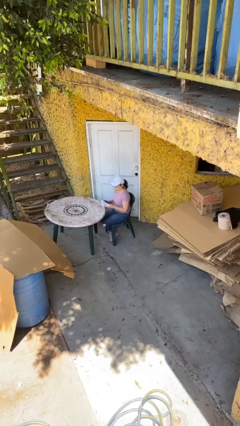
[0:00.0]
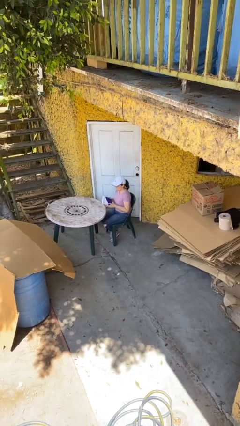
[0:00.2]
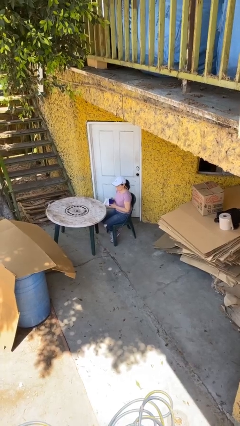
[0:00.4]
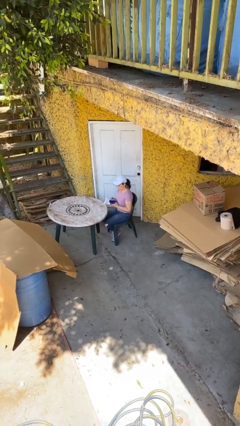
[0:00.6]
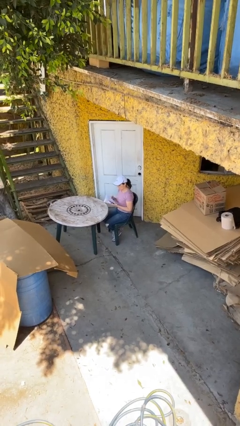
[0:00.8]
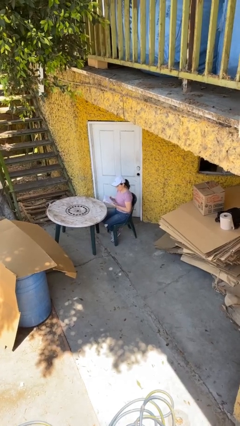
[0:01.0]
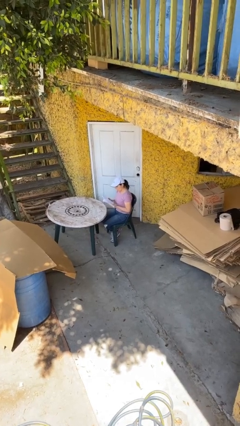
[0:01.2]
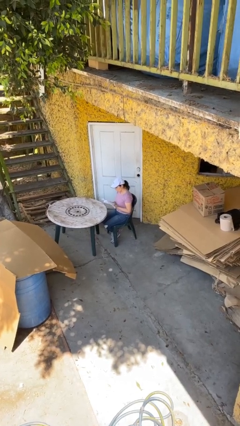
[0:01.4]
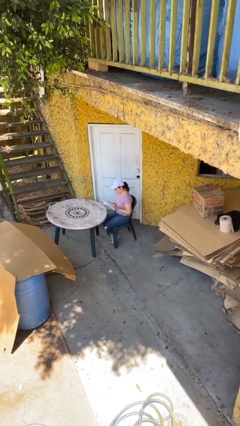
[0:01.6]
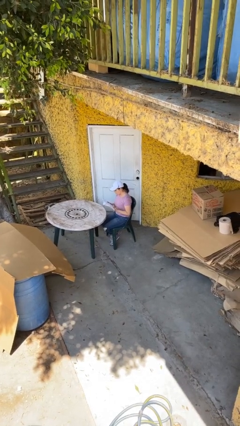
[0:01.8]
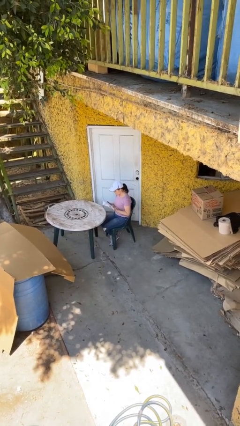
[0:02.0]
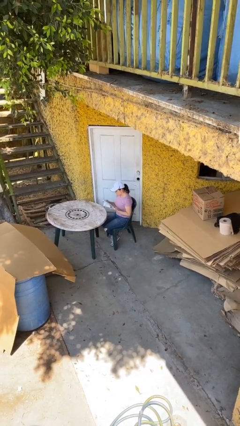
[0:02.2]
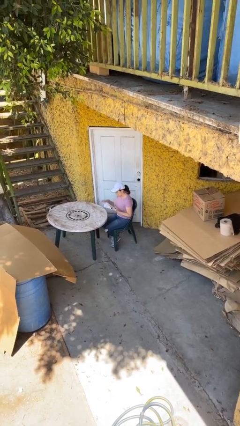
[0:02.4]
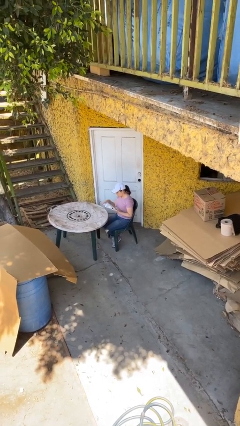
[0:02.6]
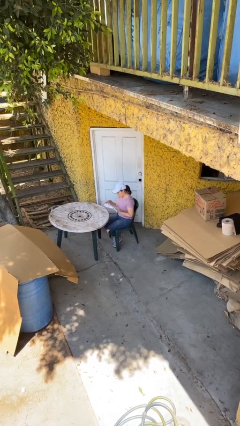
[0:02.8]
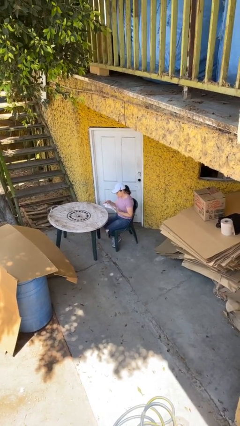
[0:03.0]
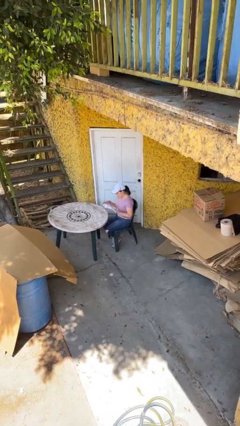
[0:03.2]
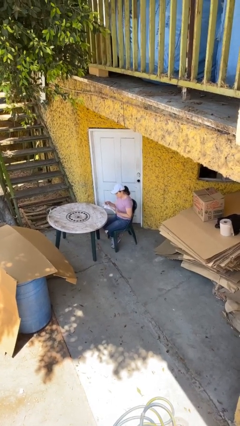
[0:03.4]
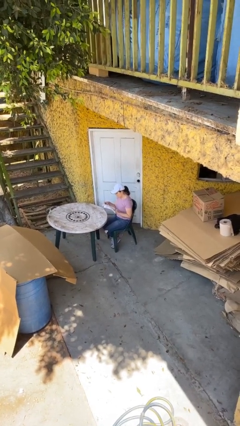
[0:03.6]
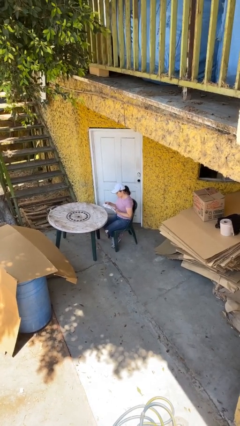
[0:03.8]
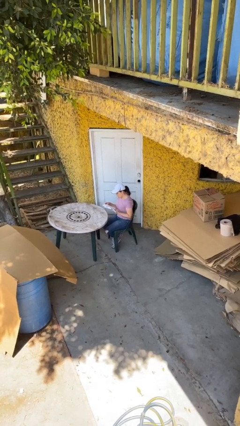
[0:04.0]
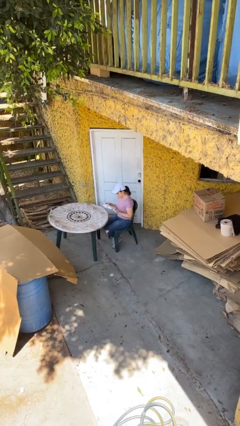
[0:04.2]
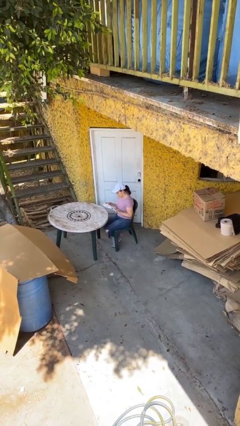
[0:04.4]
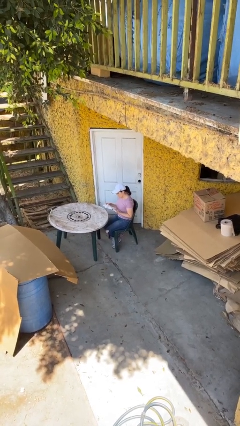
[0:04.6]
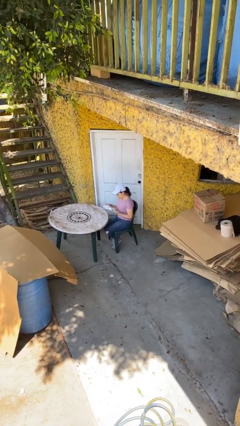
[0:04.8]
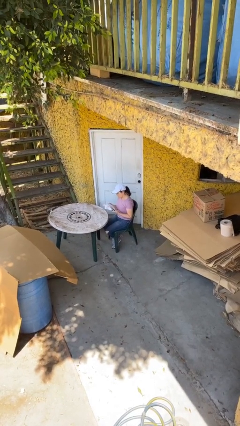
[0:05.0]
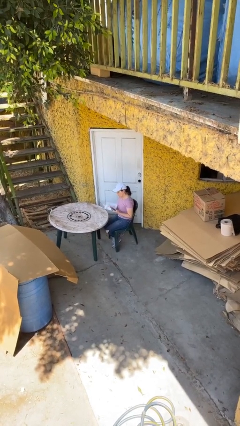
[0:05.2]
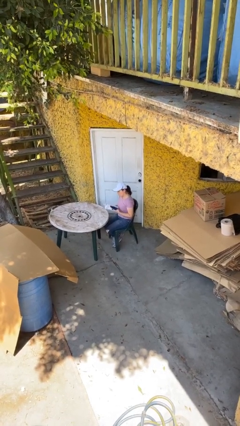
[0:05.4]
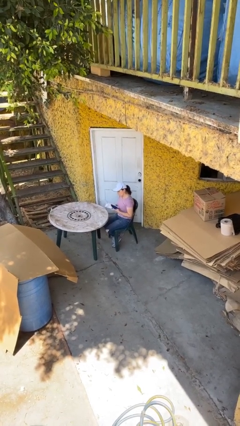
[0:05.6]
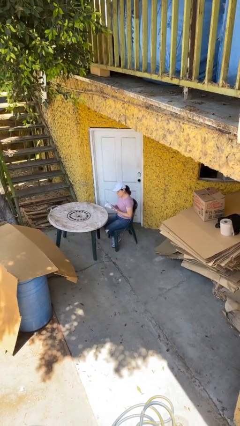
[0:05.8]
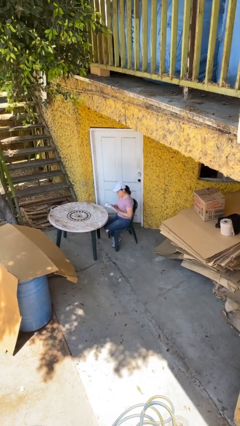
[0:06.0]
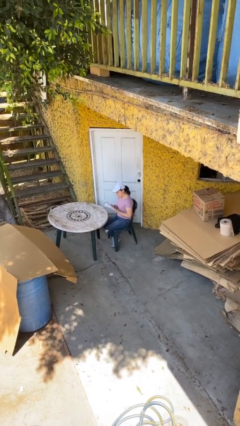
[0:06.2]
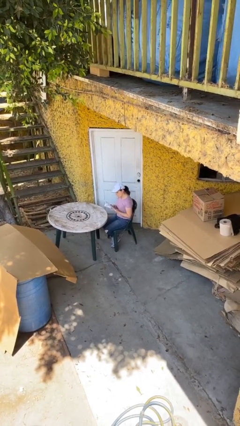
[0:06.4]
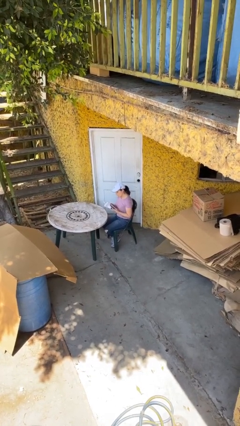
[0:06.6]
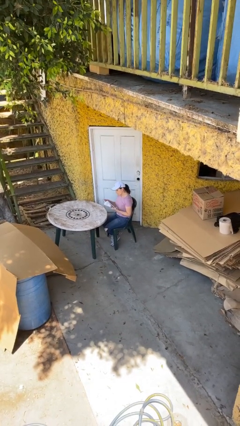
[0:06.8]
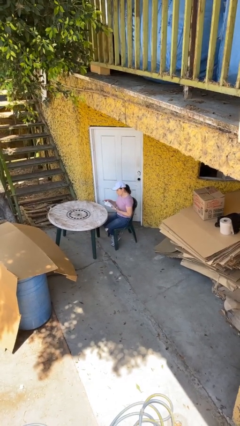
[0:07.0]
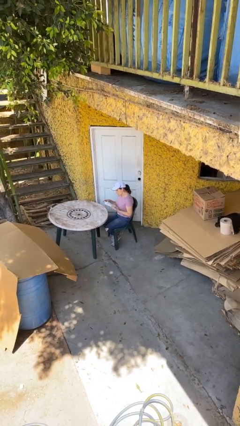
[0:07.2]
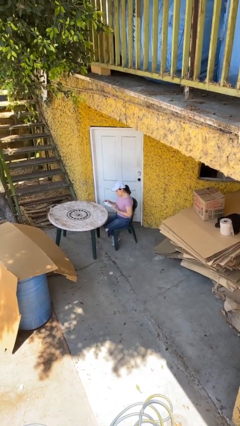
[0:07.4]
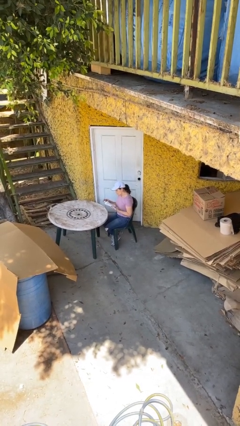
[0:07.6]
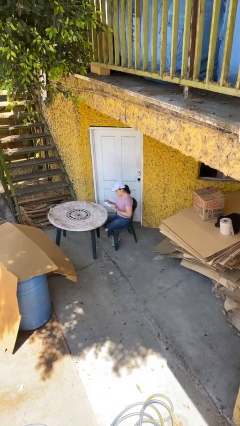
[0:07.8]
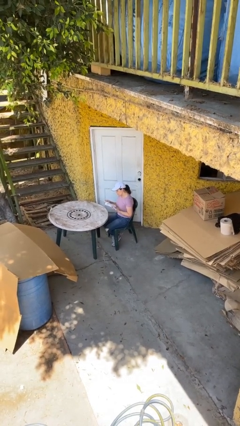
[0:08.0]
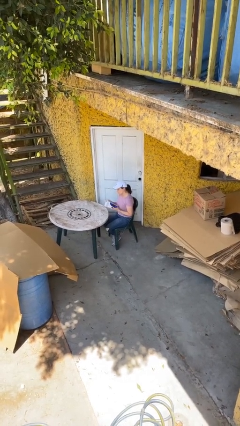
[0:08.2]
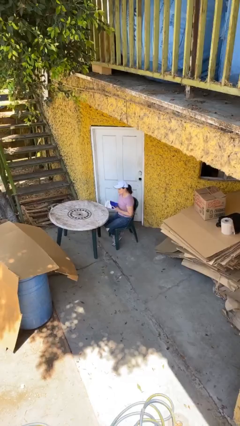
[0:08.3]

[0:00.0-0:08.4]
person reads document

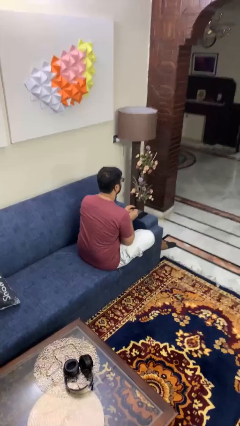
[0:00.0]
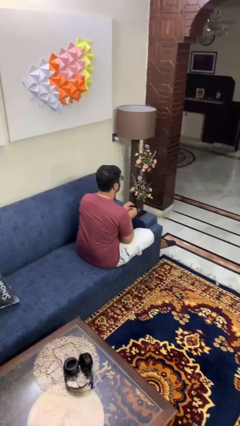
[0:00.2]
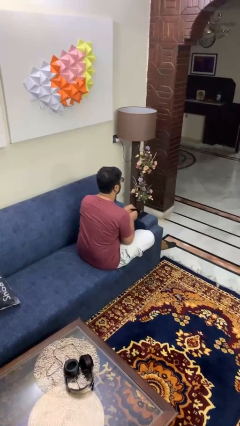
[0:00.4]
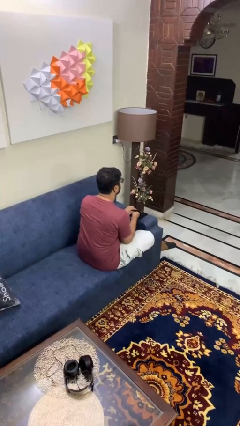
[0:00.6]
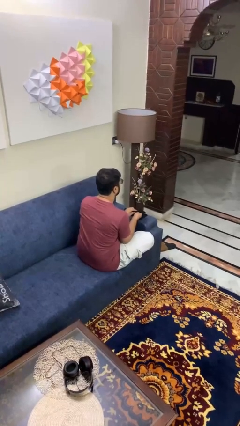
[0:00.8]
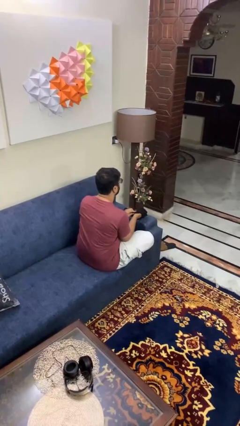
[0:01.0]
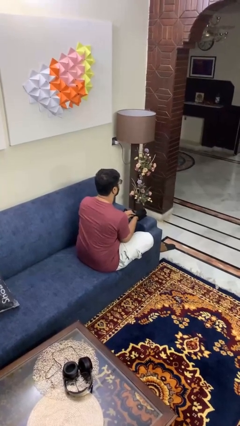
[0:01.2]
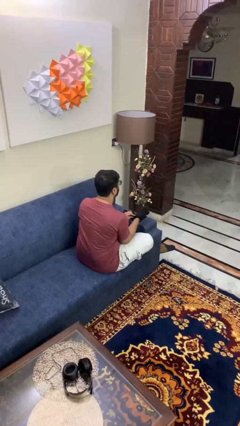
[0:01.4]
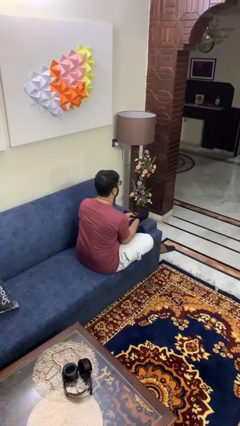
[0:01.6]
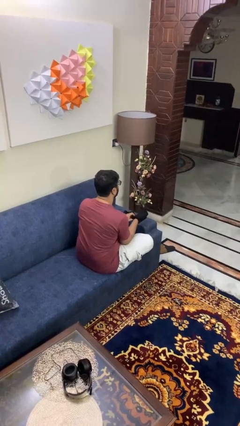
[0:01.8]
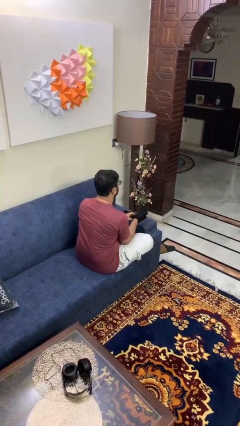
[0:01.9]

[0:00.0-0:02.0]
person puts on gloves

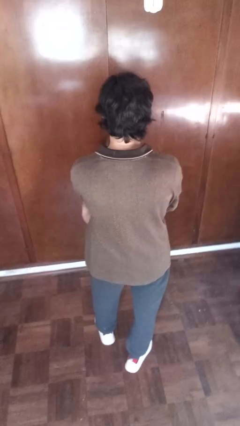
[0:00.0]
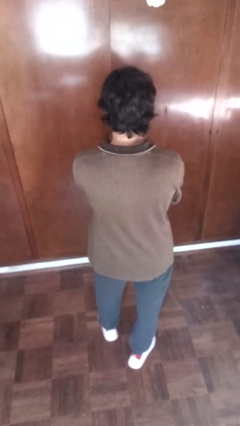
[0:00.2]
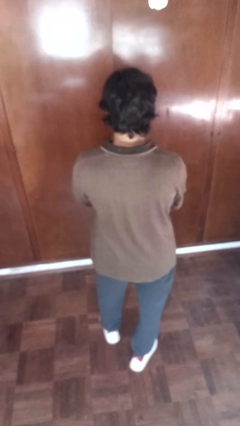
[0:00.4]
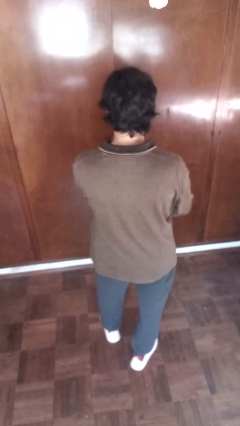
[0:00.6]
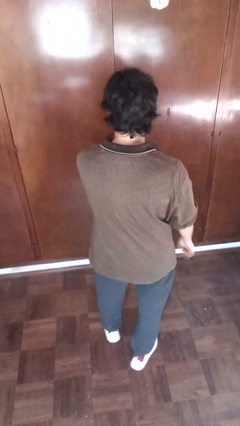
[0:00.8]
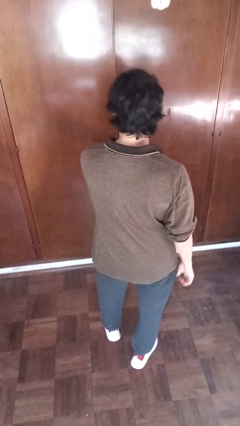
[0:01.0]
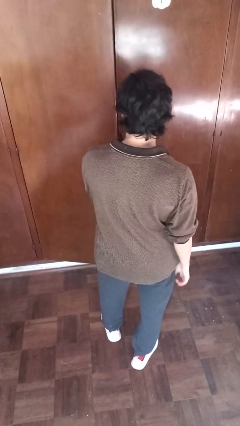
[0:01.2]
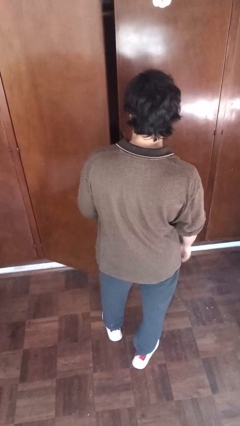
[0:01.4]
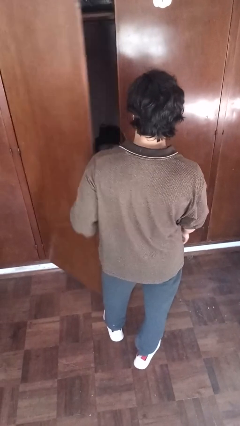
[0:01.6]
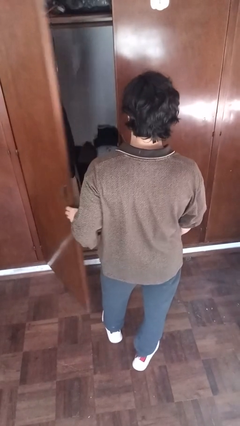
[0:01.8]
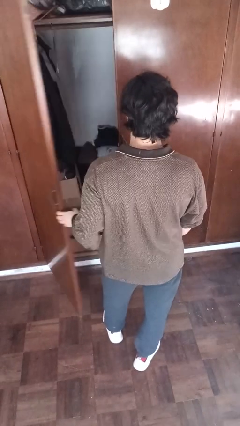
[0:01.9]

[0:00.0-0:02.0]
person opens closet door

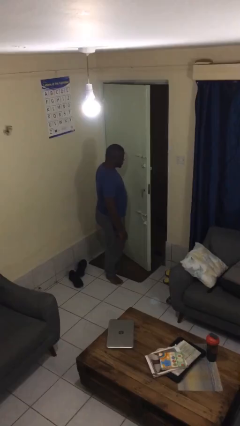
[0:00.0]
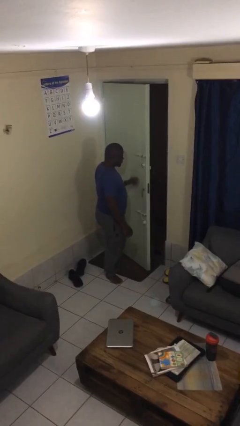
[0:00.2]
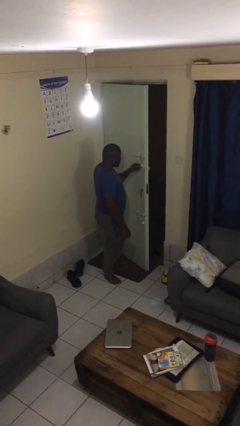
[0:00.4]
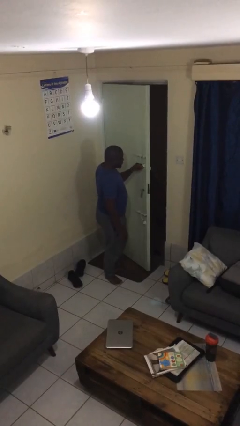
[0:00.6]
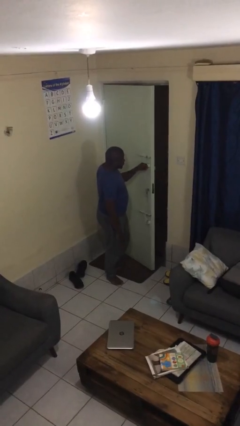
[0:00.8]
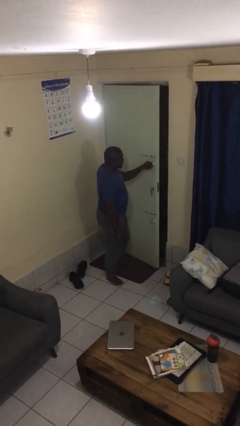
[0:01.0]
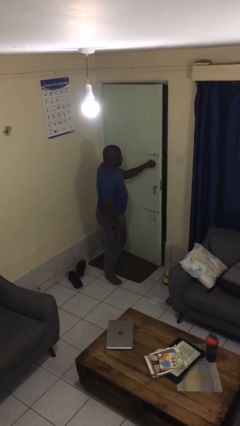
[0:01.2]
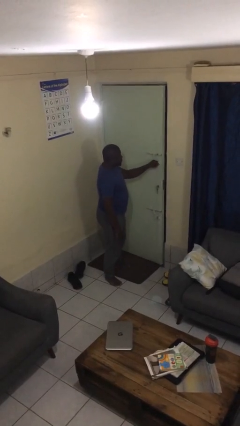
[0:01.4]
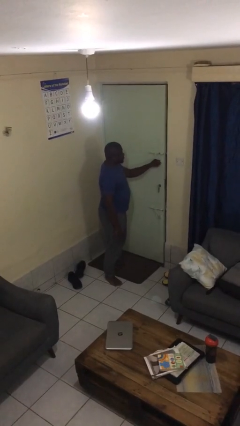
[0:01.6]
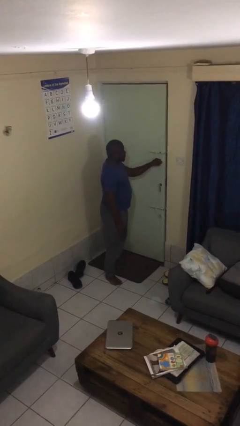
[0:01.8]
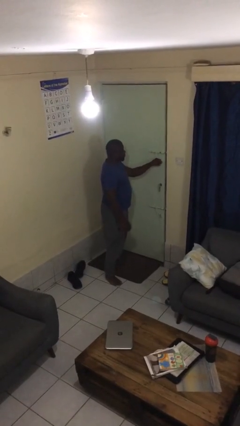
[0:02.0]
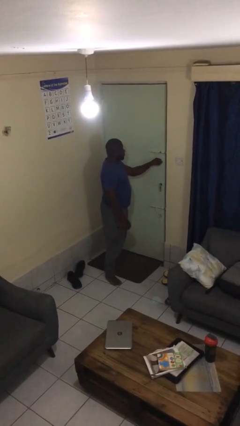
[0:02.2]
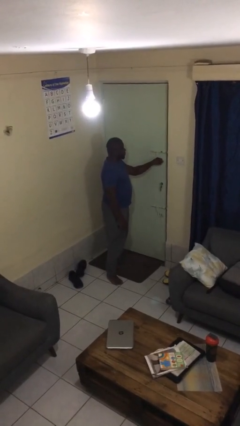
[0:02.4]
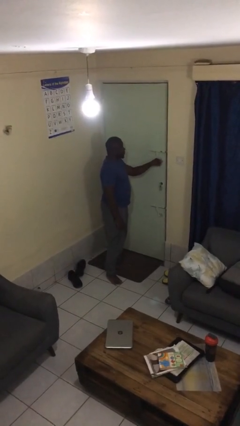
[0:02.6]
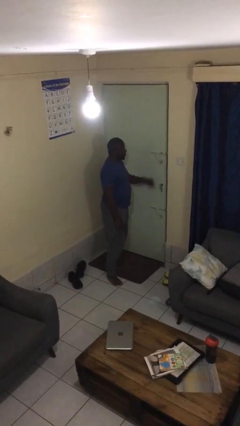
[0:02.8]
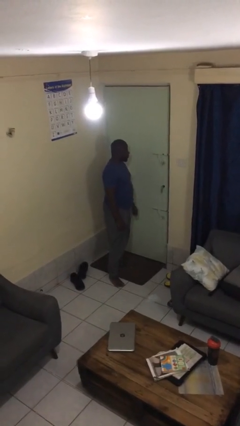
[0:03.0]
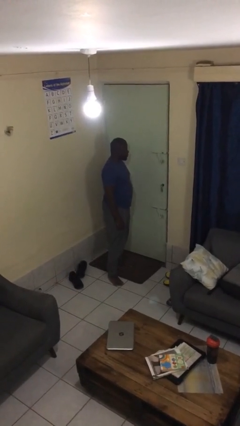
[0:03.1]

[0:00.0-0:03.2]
person closes facility door

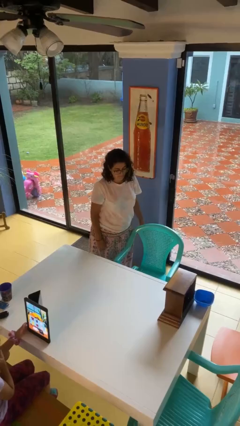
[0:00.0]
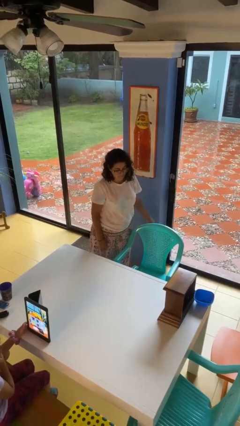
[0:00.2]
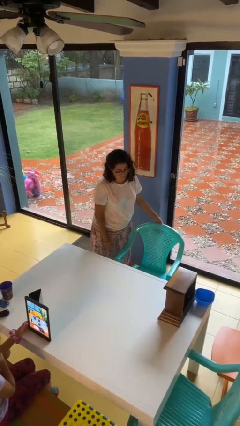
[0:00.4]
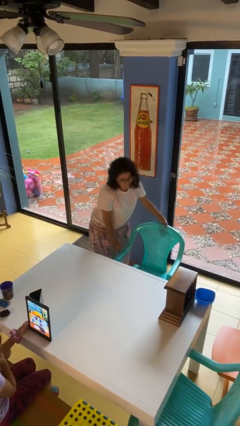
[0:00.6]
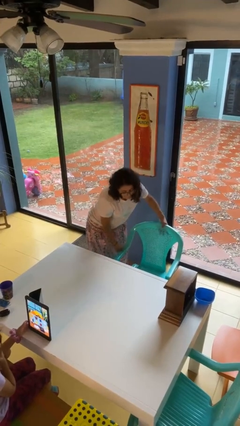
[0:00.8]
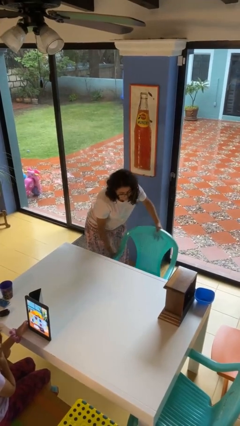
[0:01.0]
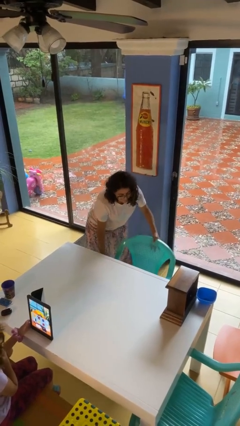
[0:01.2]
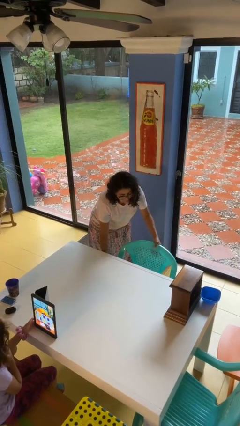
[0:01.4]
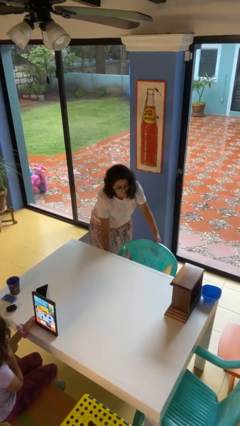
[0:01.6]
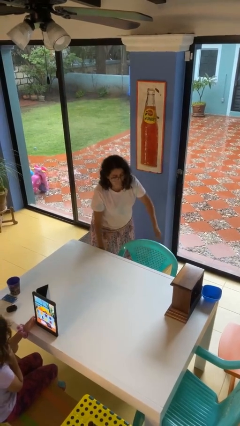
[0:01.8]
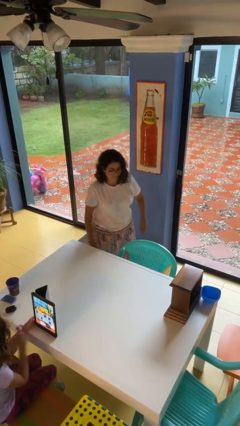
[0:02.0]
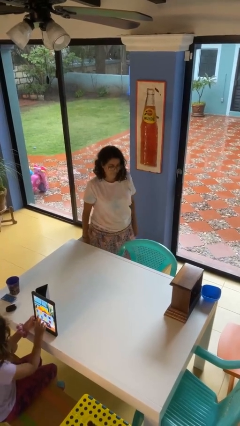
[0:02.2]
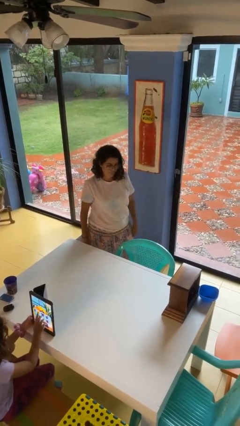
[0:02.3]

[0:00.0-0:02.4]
person pushes in chair
